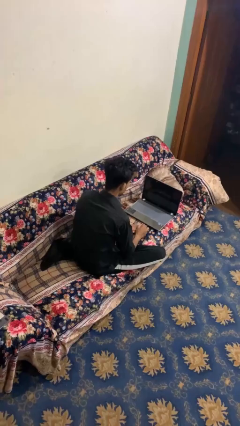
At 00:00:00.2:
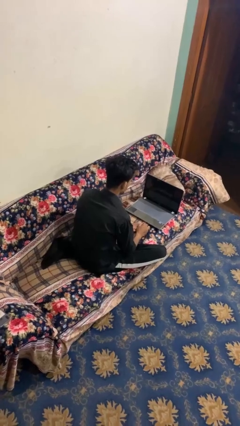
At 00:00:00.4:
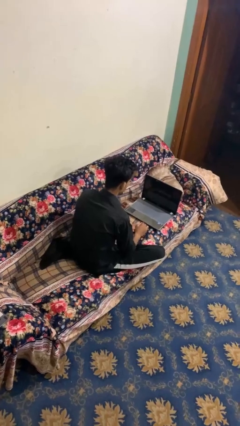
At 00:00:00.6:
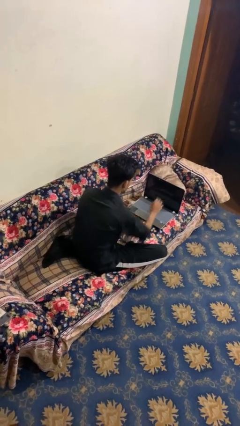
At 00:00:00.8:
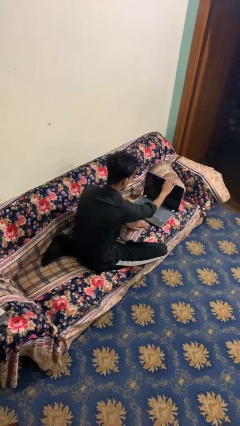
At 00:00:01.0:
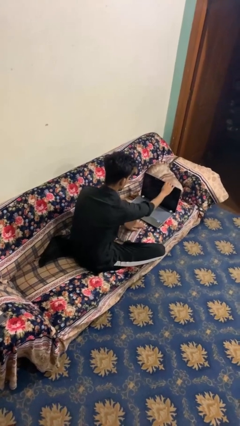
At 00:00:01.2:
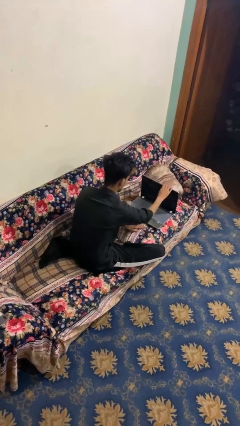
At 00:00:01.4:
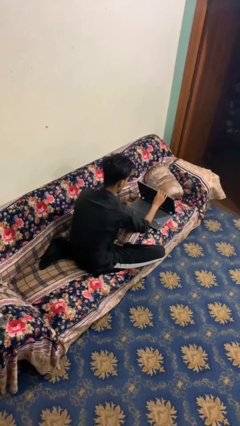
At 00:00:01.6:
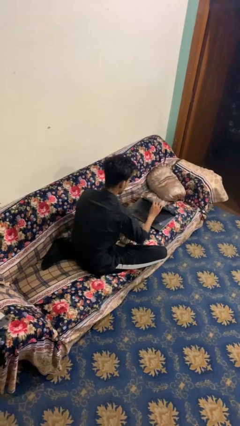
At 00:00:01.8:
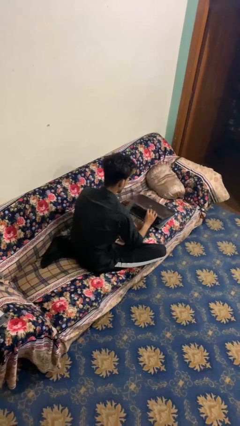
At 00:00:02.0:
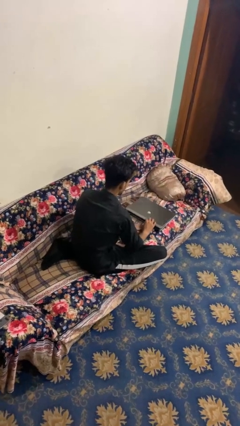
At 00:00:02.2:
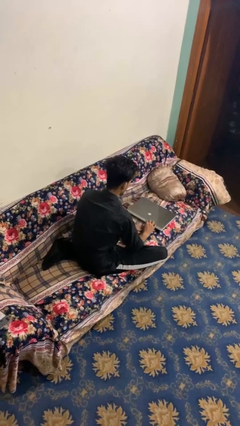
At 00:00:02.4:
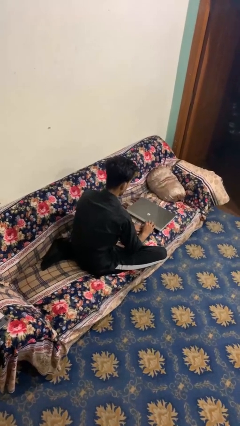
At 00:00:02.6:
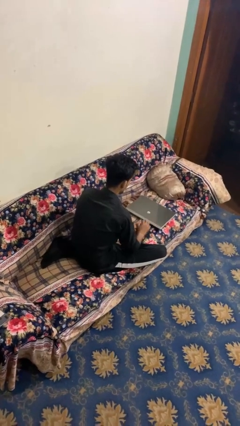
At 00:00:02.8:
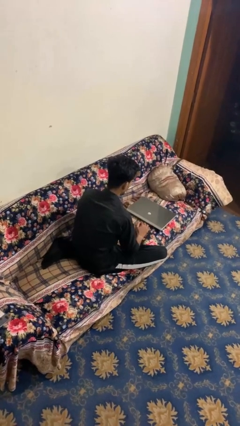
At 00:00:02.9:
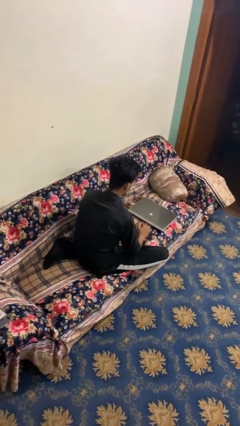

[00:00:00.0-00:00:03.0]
person closes laptop

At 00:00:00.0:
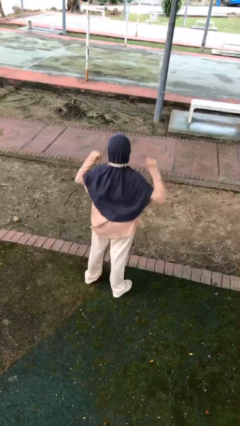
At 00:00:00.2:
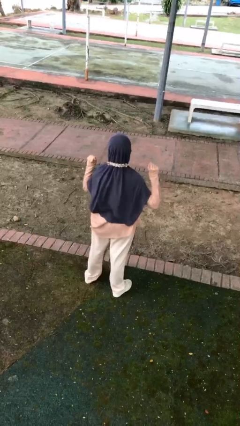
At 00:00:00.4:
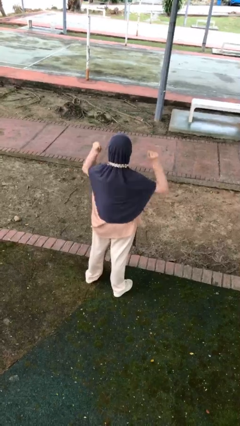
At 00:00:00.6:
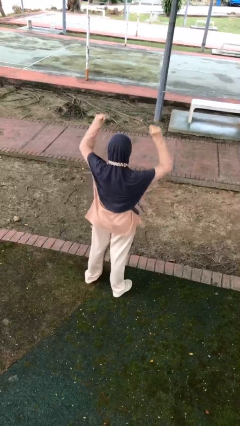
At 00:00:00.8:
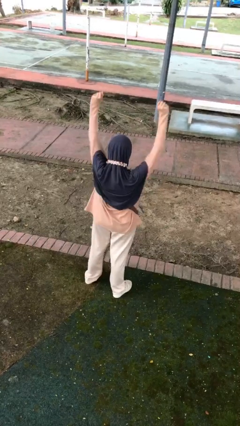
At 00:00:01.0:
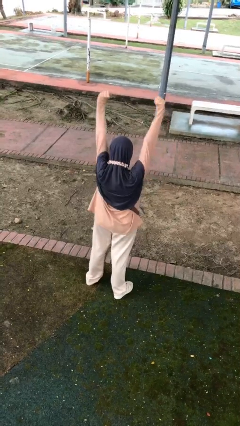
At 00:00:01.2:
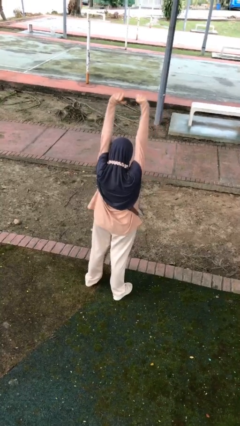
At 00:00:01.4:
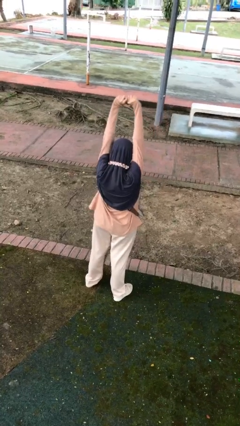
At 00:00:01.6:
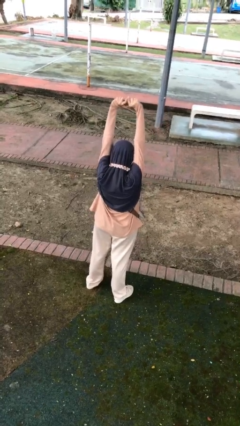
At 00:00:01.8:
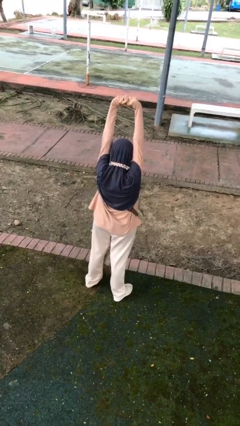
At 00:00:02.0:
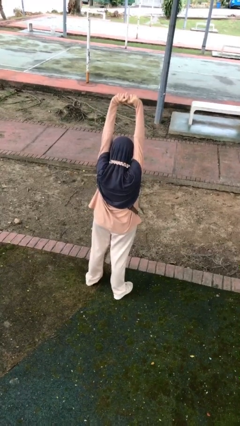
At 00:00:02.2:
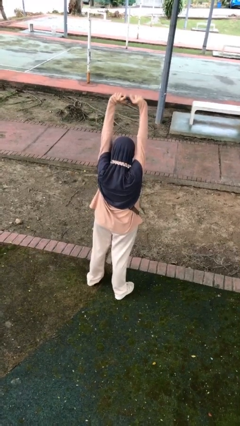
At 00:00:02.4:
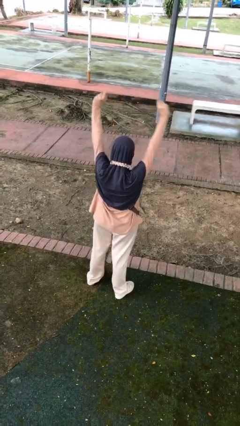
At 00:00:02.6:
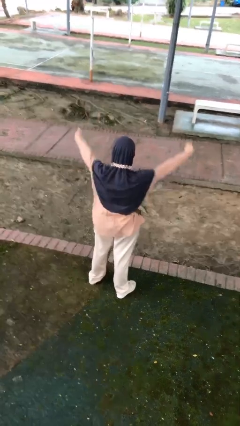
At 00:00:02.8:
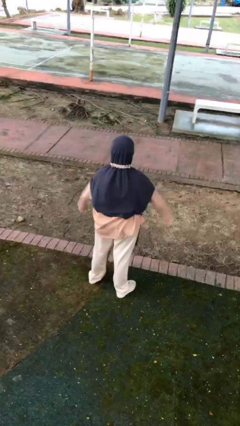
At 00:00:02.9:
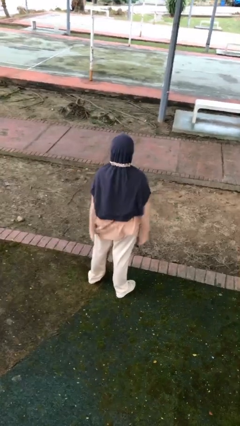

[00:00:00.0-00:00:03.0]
person stretches arms over head

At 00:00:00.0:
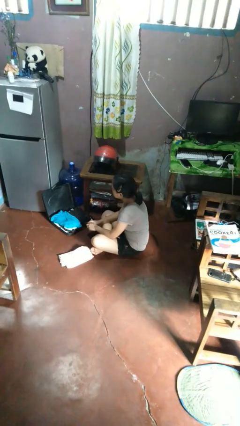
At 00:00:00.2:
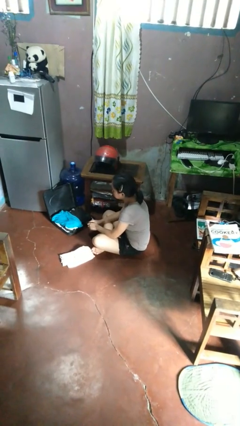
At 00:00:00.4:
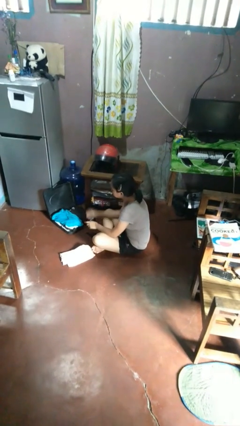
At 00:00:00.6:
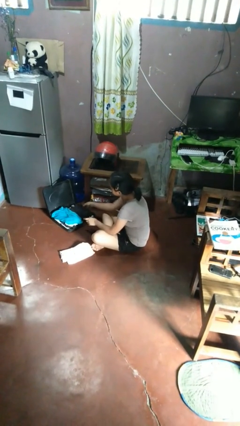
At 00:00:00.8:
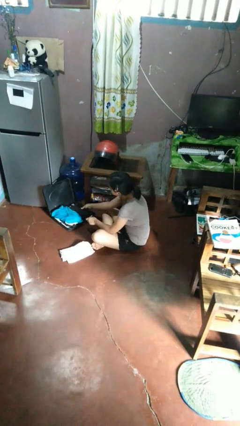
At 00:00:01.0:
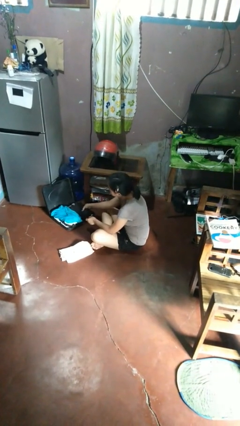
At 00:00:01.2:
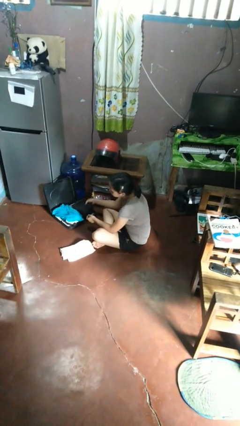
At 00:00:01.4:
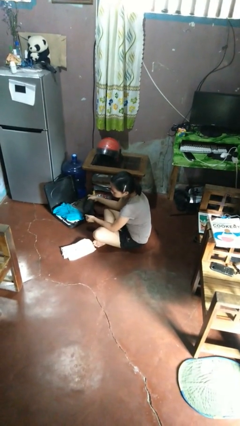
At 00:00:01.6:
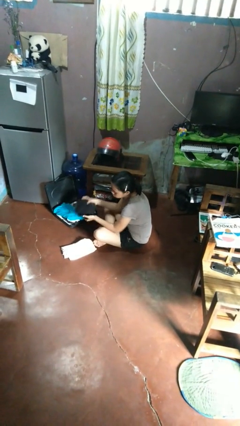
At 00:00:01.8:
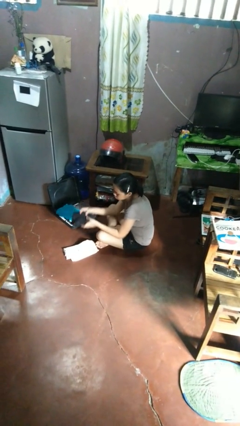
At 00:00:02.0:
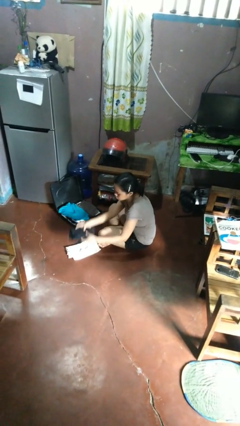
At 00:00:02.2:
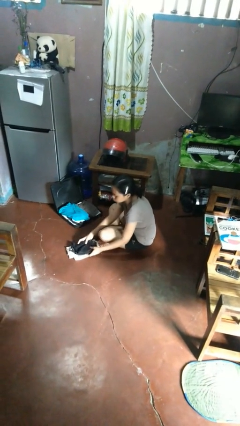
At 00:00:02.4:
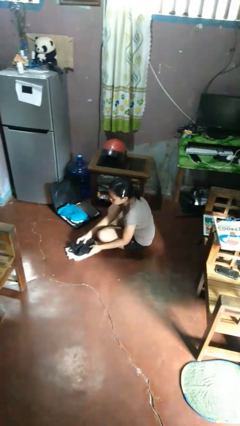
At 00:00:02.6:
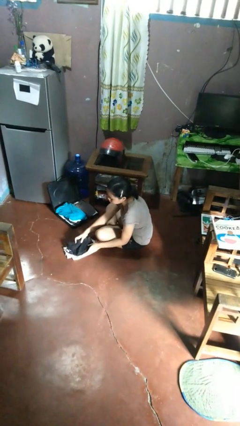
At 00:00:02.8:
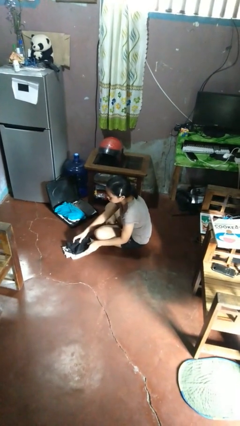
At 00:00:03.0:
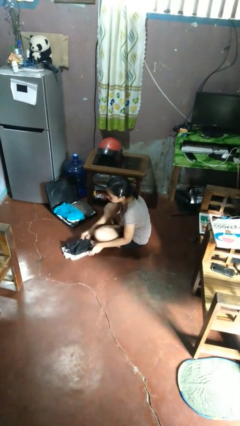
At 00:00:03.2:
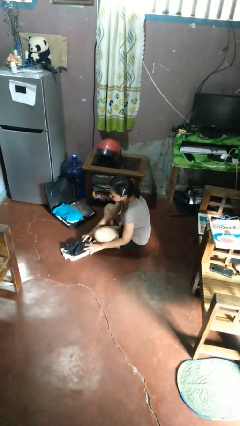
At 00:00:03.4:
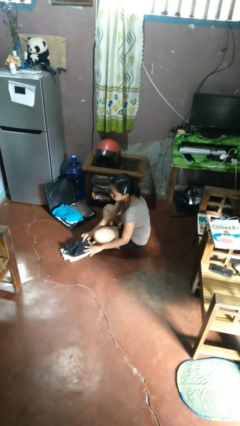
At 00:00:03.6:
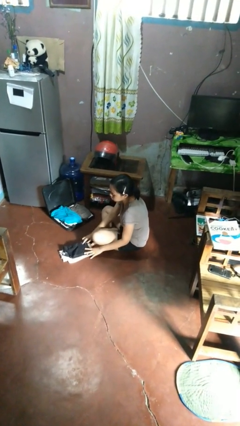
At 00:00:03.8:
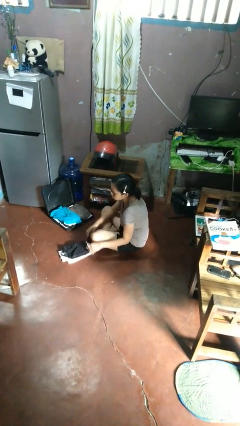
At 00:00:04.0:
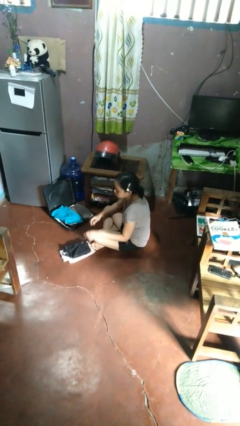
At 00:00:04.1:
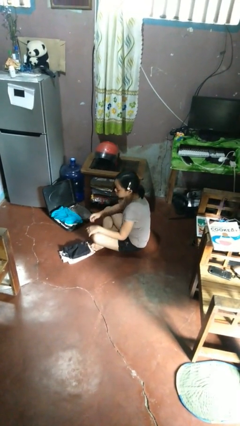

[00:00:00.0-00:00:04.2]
person unloads clothes from suitcase

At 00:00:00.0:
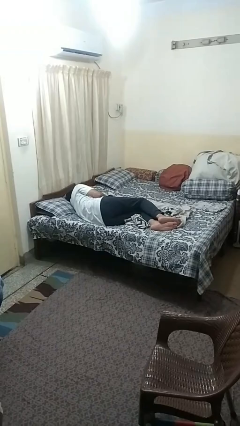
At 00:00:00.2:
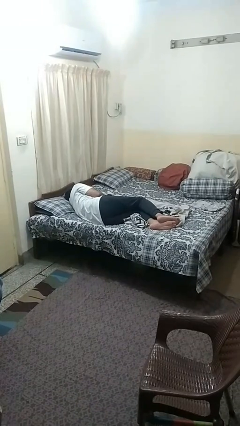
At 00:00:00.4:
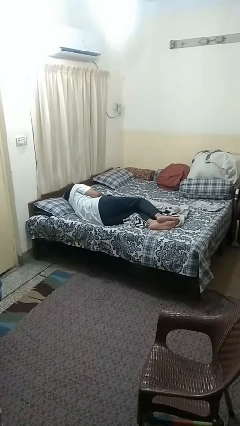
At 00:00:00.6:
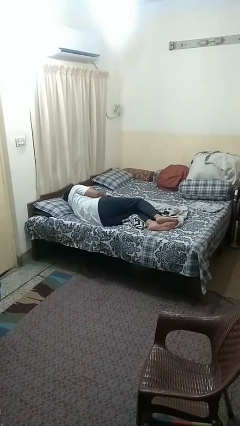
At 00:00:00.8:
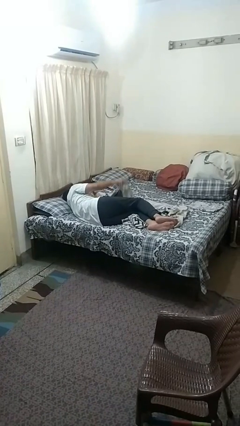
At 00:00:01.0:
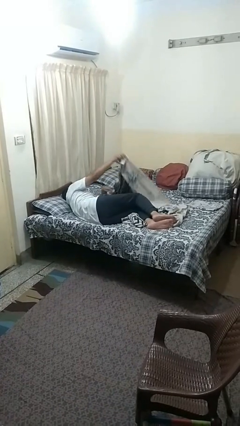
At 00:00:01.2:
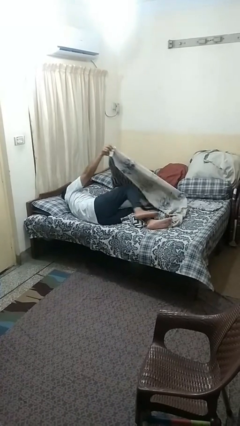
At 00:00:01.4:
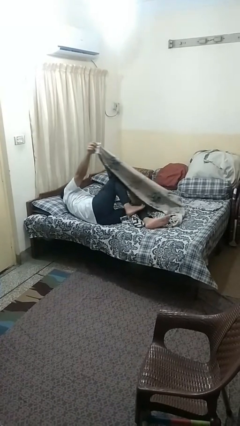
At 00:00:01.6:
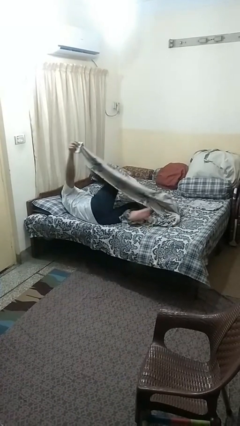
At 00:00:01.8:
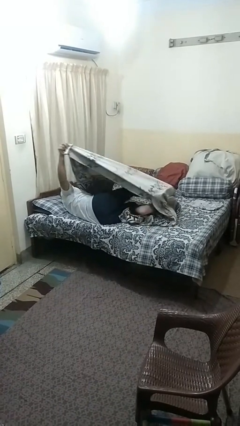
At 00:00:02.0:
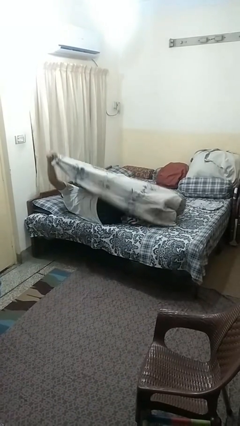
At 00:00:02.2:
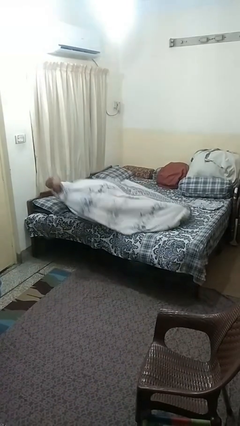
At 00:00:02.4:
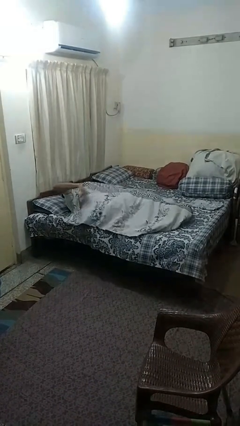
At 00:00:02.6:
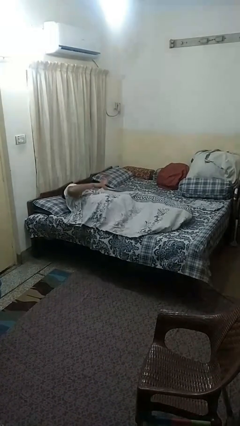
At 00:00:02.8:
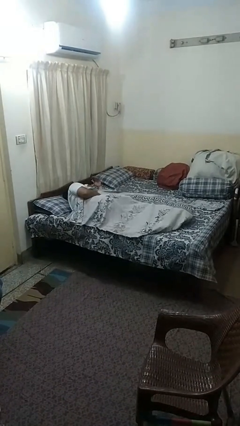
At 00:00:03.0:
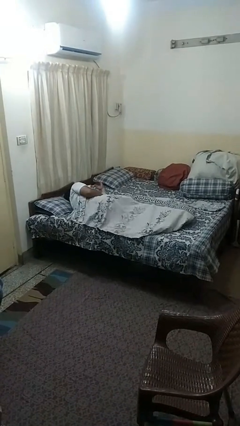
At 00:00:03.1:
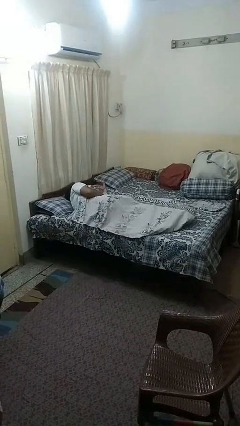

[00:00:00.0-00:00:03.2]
person covers with bedsheets

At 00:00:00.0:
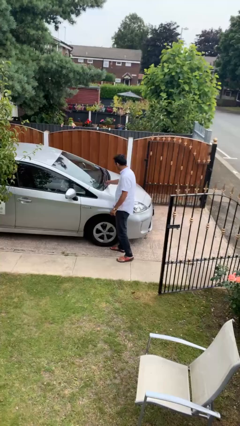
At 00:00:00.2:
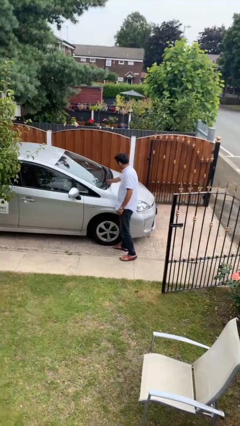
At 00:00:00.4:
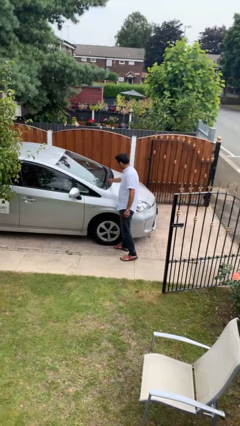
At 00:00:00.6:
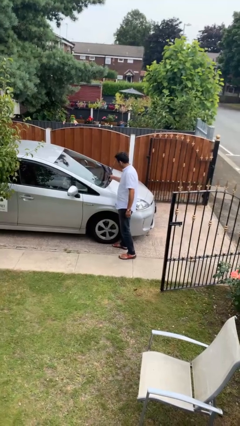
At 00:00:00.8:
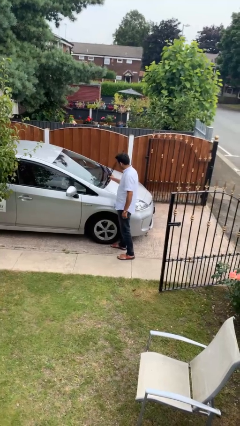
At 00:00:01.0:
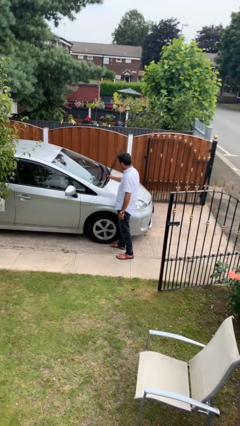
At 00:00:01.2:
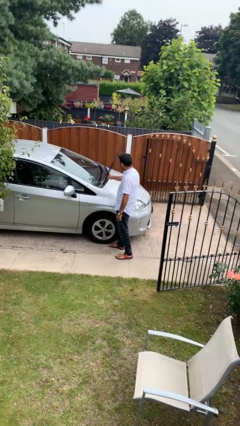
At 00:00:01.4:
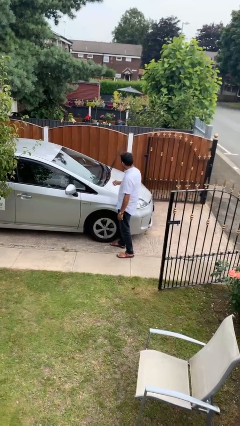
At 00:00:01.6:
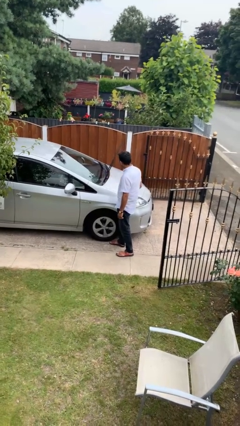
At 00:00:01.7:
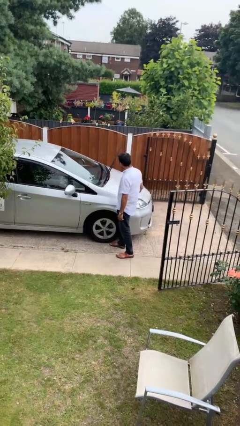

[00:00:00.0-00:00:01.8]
person flips up car wipers

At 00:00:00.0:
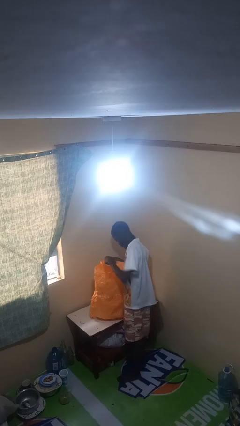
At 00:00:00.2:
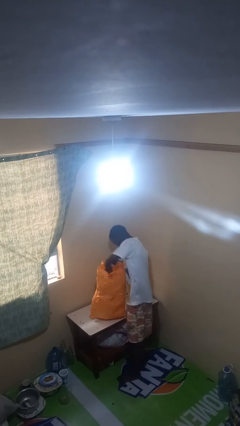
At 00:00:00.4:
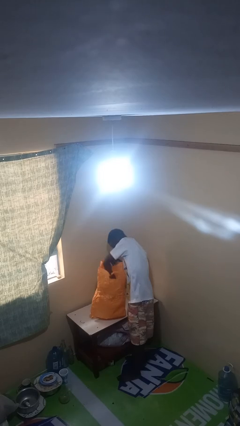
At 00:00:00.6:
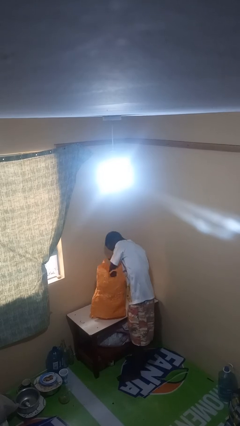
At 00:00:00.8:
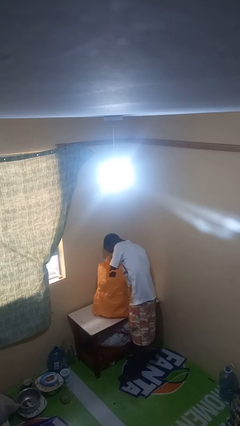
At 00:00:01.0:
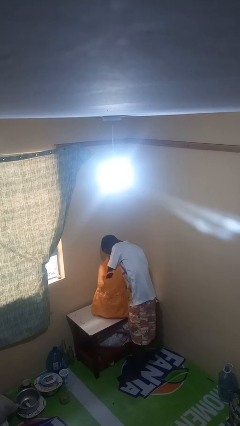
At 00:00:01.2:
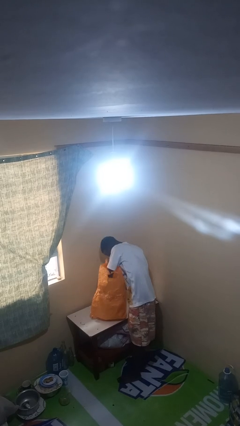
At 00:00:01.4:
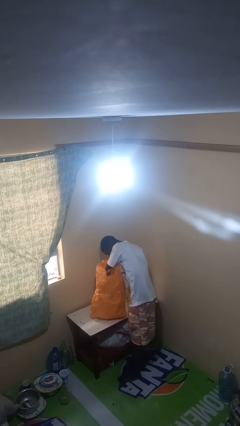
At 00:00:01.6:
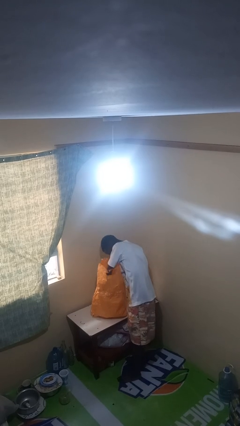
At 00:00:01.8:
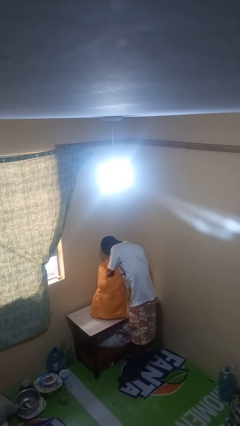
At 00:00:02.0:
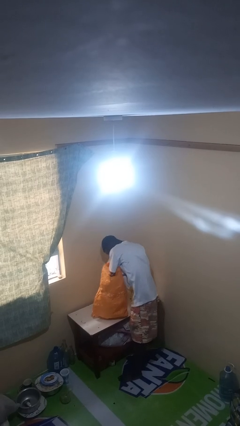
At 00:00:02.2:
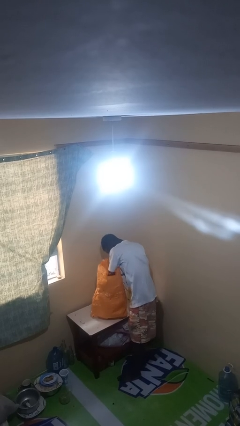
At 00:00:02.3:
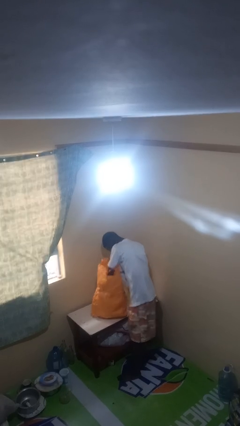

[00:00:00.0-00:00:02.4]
person searches in bag
